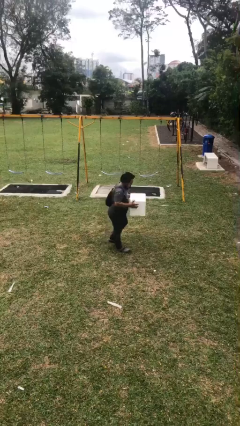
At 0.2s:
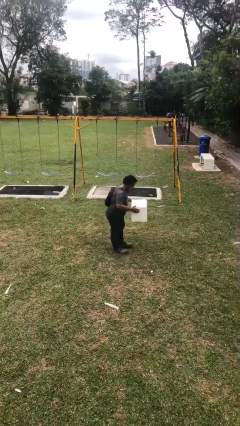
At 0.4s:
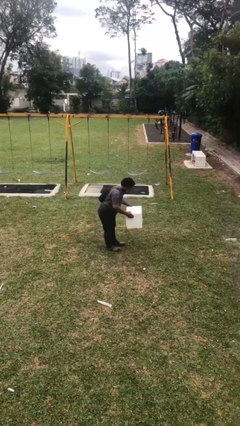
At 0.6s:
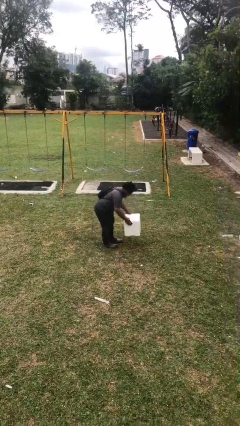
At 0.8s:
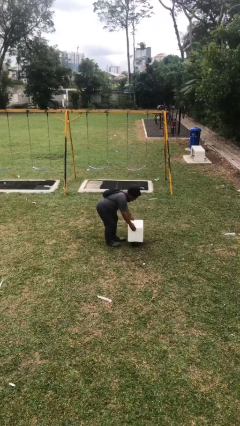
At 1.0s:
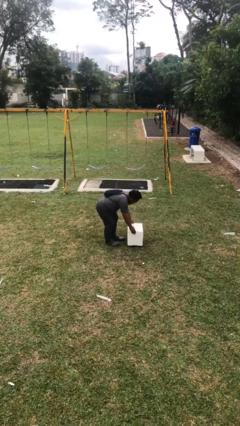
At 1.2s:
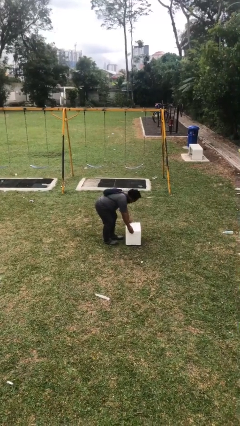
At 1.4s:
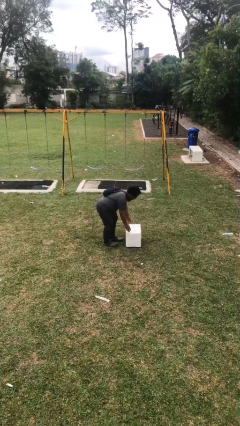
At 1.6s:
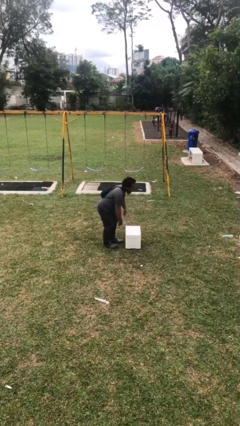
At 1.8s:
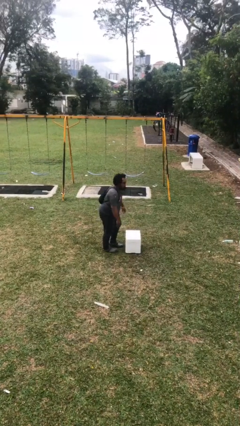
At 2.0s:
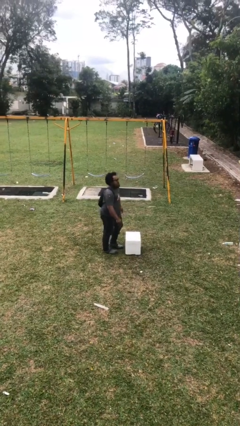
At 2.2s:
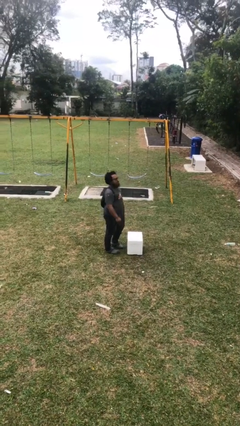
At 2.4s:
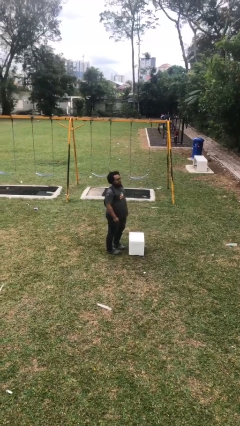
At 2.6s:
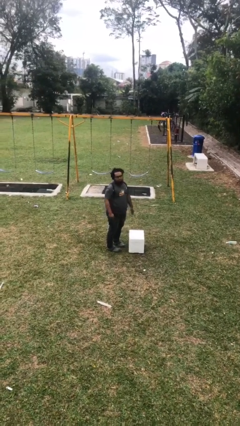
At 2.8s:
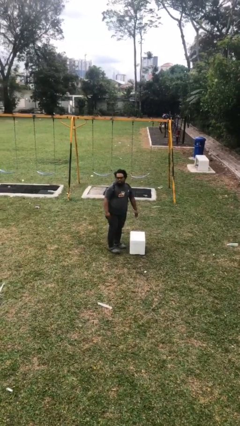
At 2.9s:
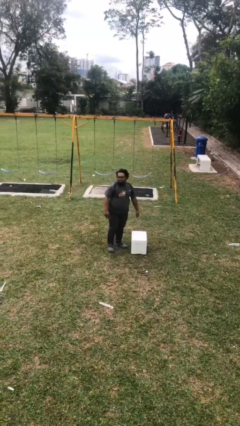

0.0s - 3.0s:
person puts down object on floor

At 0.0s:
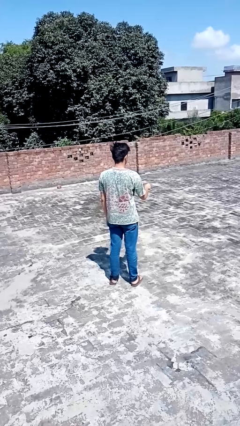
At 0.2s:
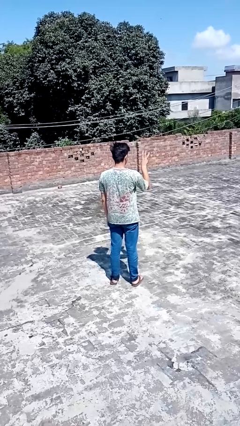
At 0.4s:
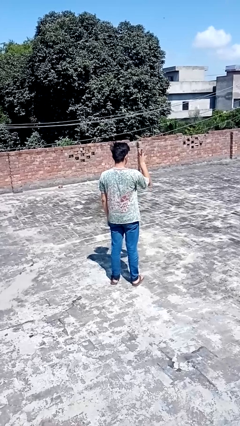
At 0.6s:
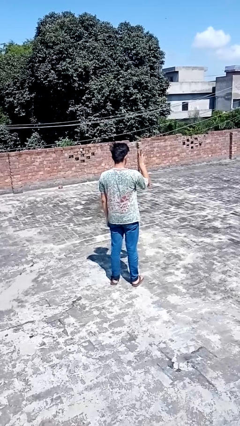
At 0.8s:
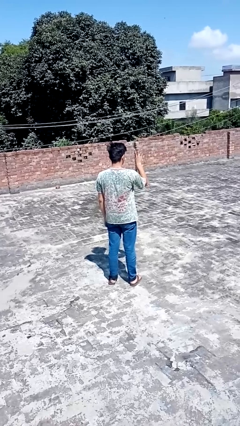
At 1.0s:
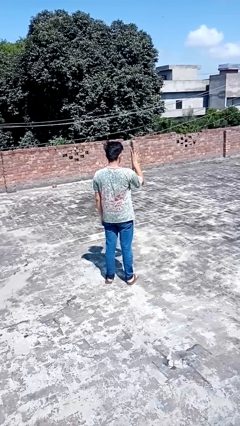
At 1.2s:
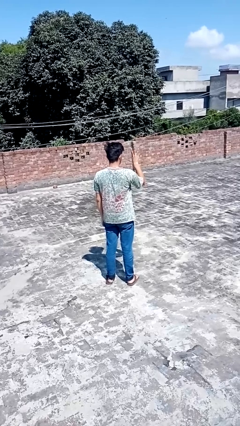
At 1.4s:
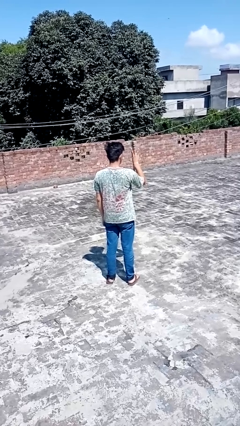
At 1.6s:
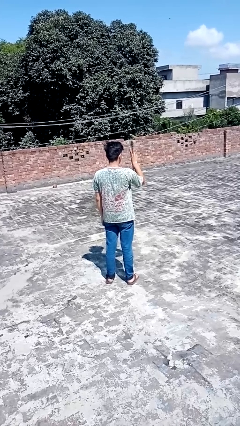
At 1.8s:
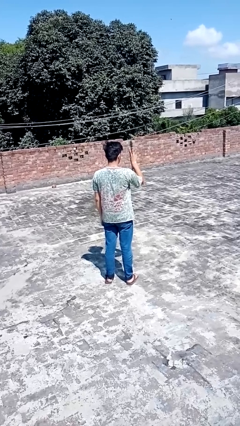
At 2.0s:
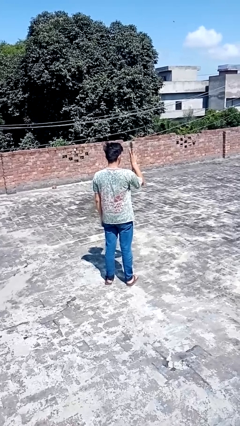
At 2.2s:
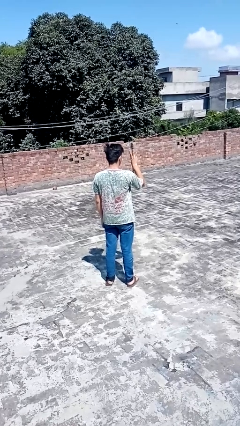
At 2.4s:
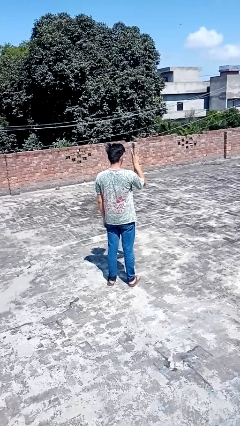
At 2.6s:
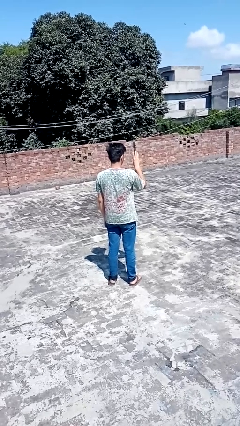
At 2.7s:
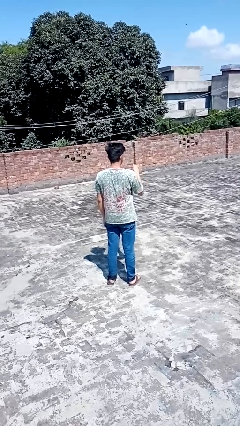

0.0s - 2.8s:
person gestures number three

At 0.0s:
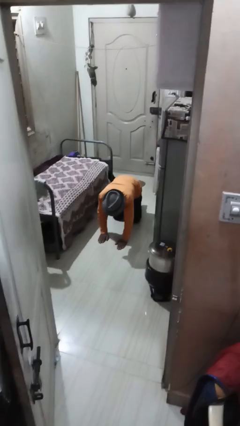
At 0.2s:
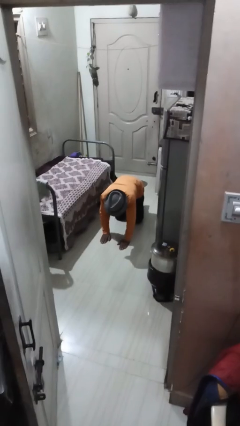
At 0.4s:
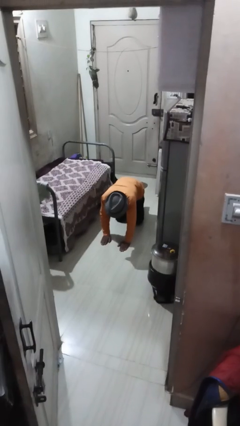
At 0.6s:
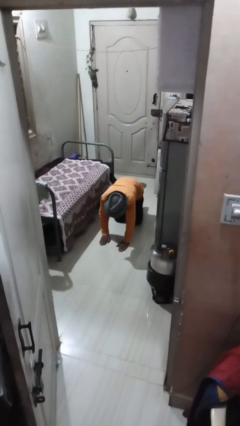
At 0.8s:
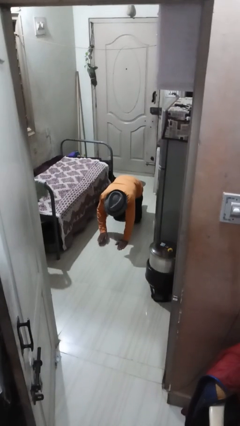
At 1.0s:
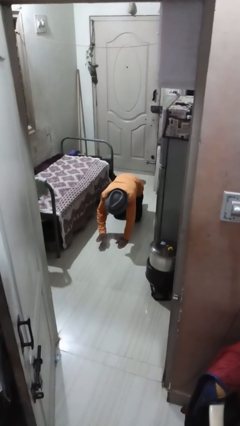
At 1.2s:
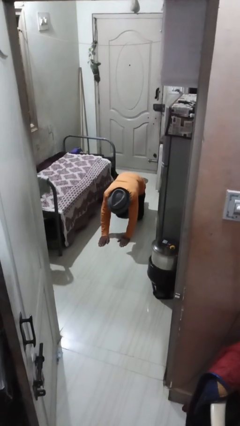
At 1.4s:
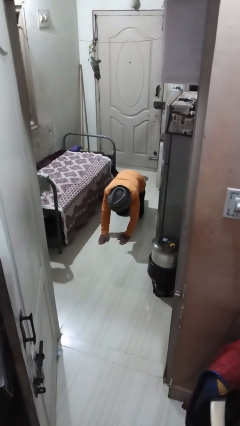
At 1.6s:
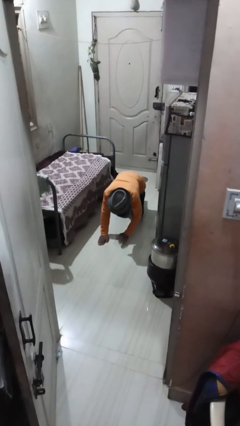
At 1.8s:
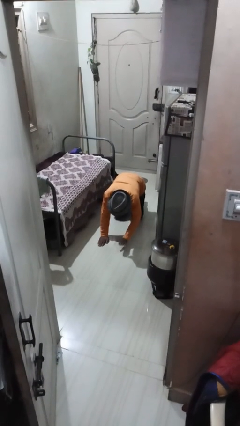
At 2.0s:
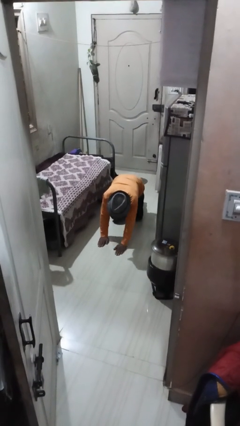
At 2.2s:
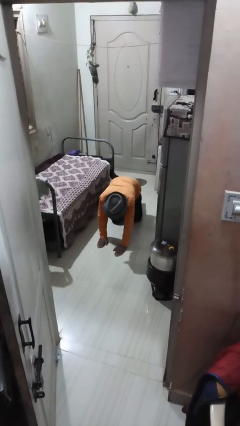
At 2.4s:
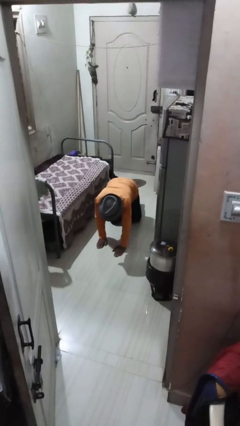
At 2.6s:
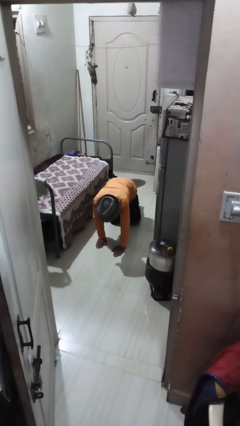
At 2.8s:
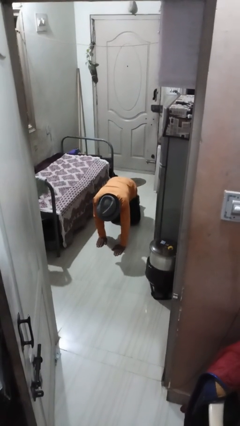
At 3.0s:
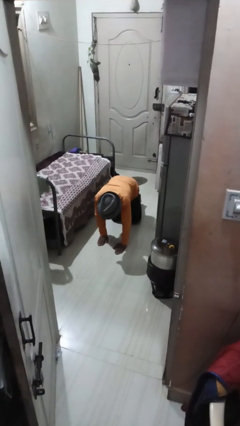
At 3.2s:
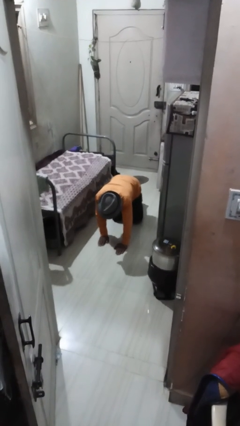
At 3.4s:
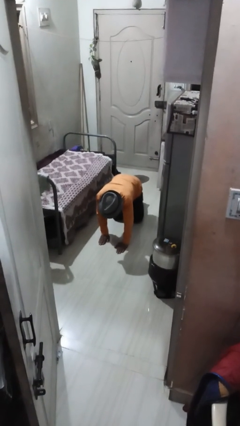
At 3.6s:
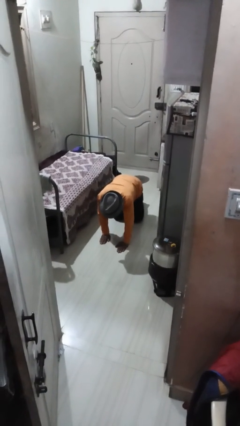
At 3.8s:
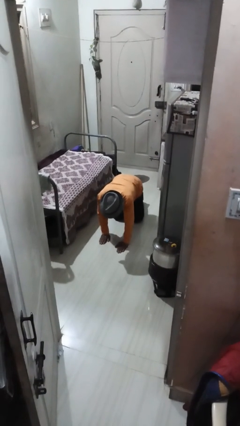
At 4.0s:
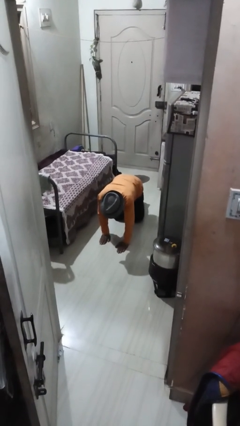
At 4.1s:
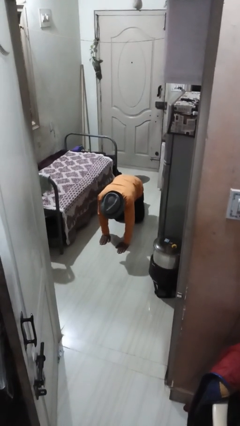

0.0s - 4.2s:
person crawls

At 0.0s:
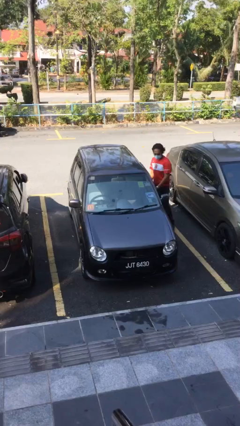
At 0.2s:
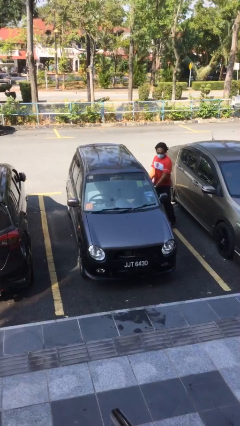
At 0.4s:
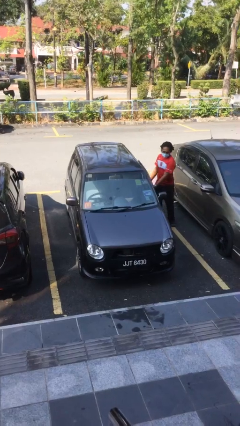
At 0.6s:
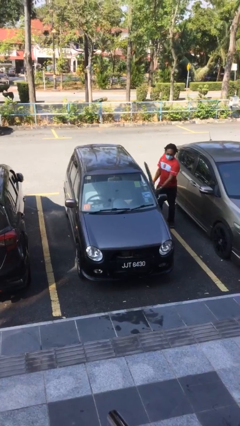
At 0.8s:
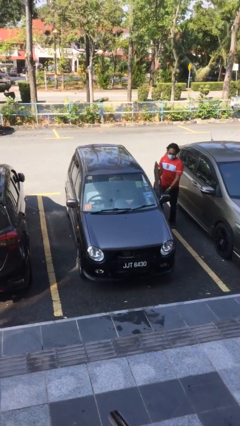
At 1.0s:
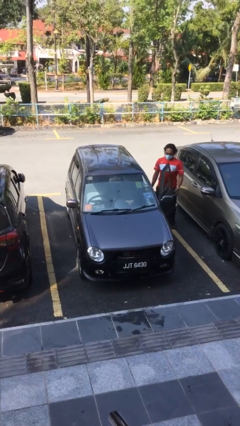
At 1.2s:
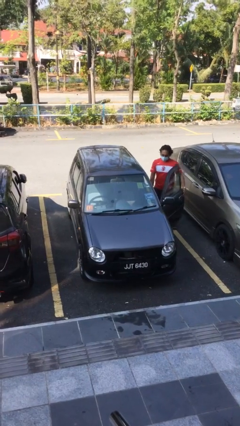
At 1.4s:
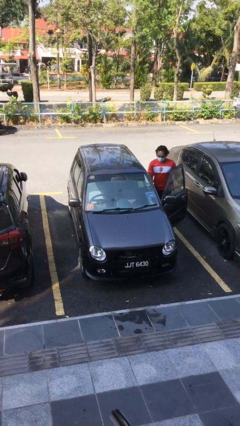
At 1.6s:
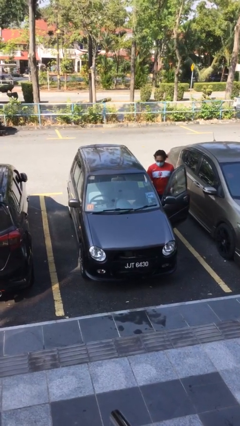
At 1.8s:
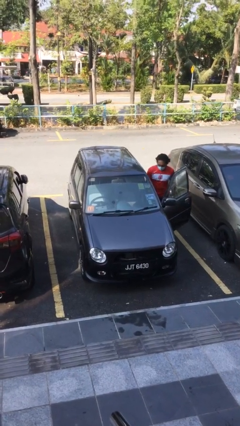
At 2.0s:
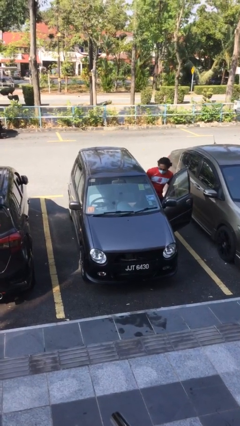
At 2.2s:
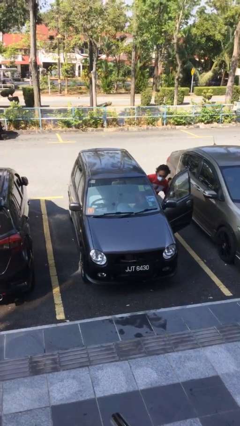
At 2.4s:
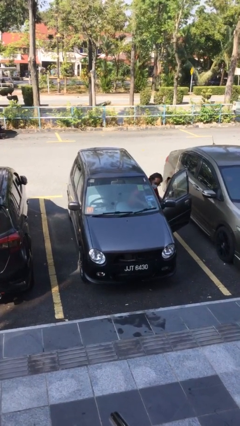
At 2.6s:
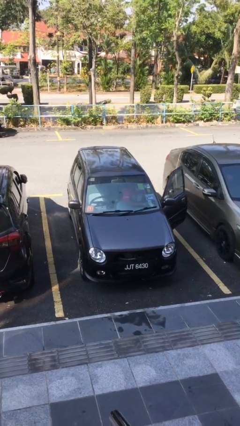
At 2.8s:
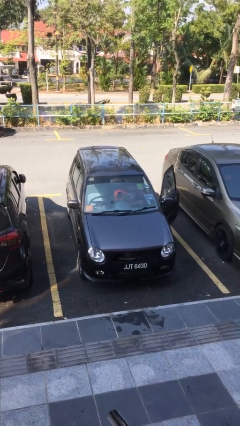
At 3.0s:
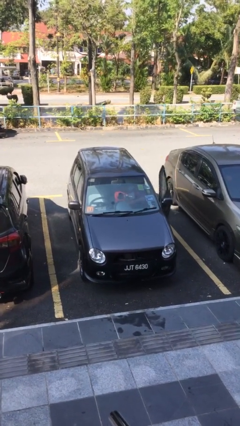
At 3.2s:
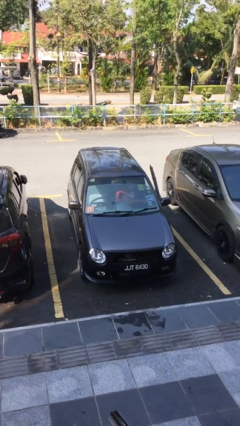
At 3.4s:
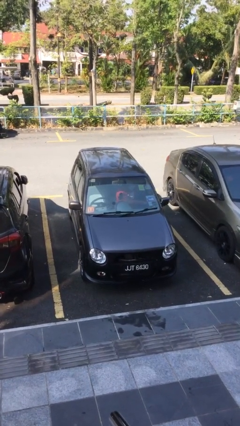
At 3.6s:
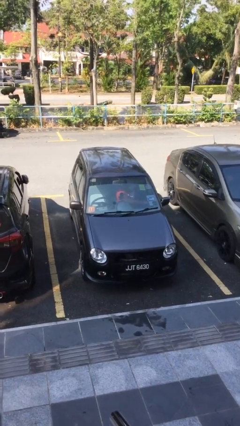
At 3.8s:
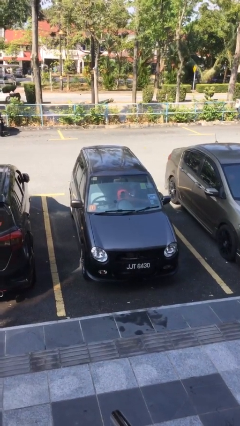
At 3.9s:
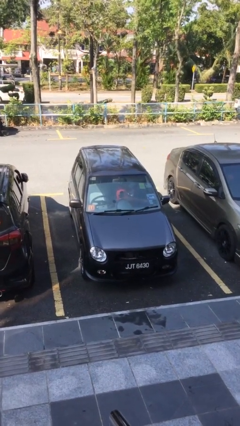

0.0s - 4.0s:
car picks up person

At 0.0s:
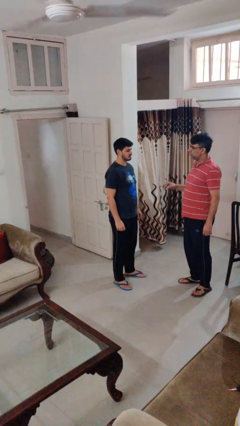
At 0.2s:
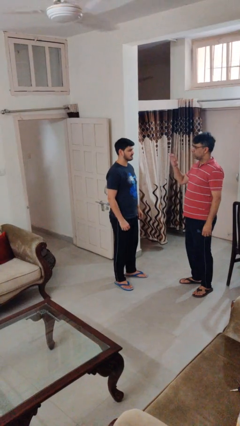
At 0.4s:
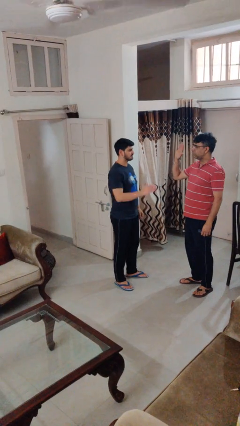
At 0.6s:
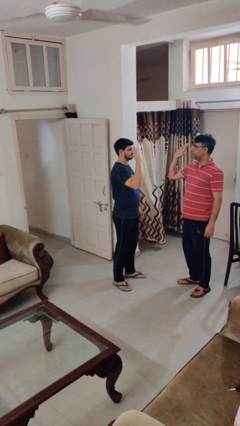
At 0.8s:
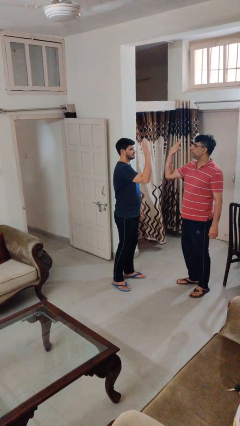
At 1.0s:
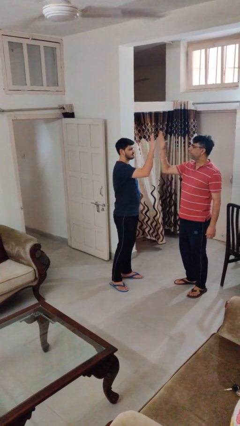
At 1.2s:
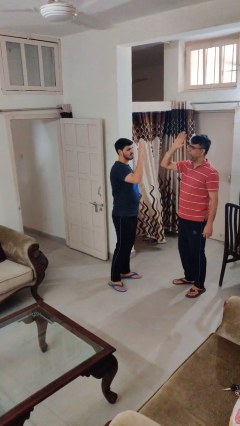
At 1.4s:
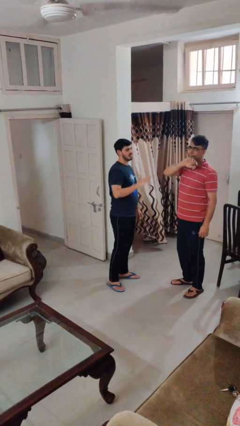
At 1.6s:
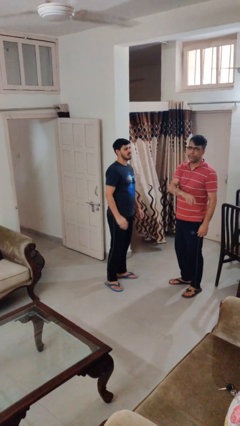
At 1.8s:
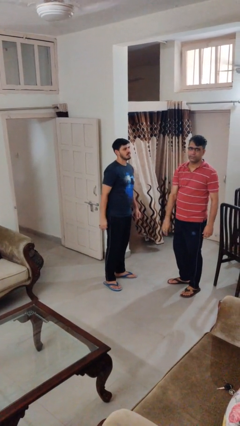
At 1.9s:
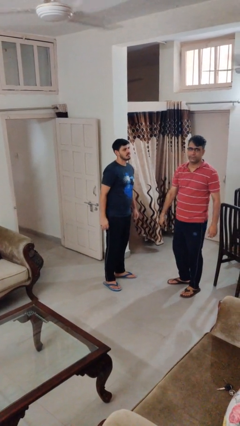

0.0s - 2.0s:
person highfives hand

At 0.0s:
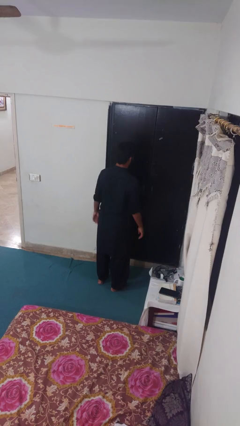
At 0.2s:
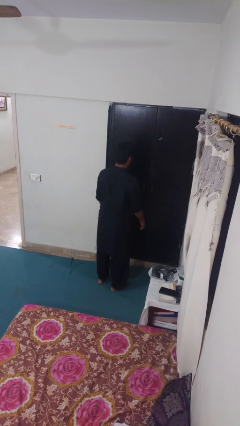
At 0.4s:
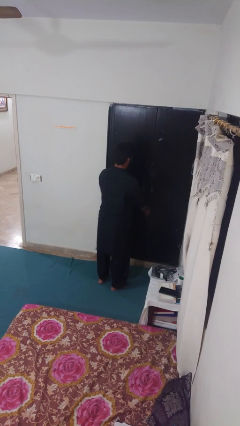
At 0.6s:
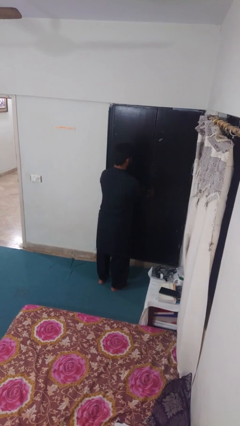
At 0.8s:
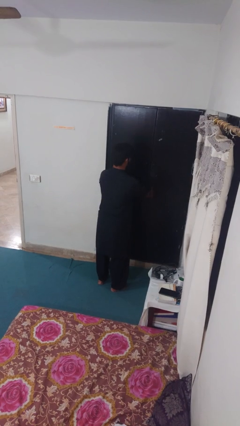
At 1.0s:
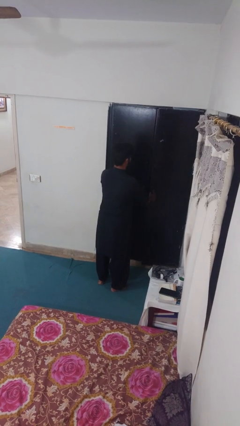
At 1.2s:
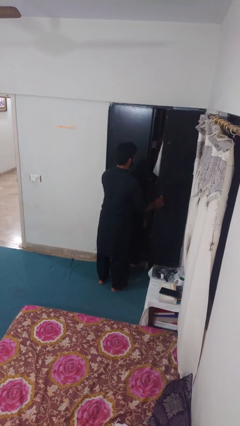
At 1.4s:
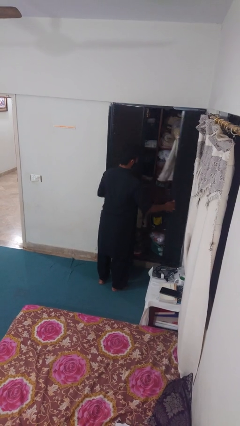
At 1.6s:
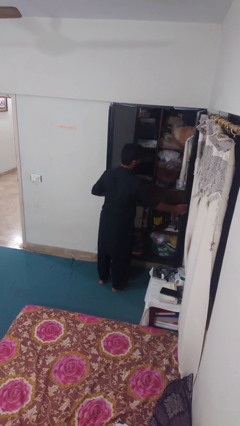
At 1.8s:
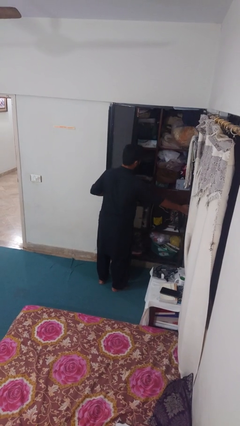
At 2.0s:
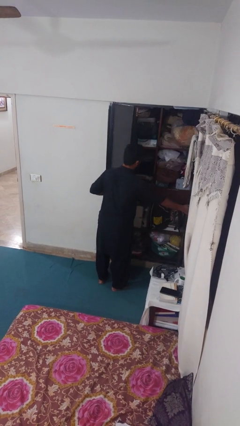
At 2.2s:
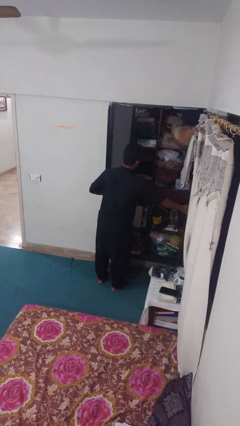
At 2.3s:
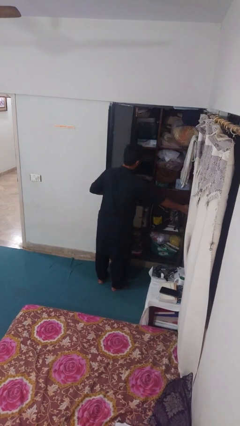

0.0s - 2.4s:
person opens closet door
